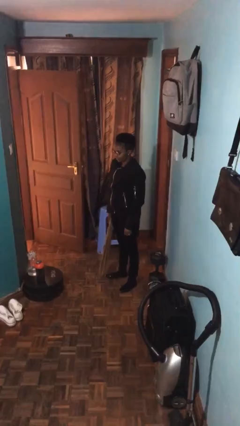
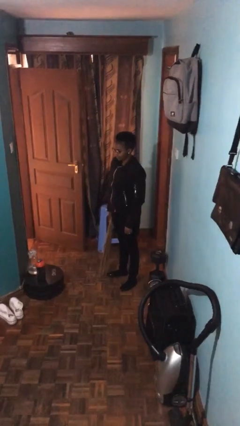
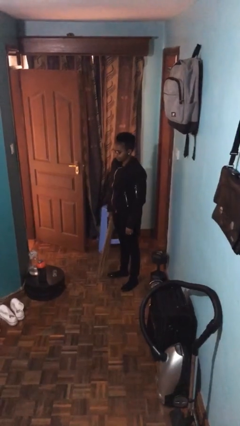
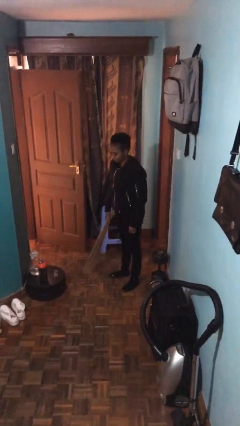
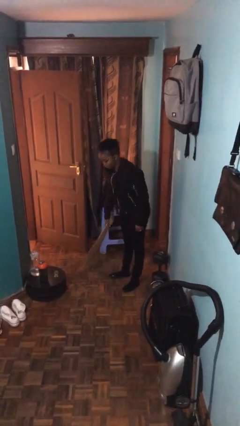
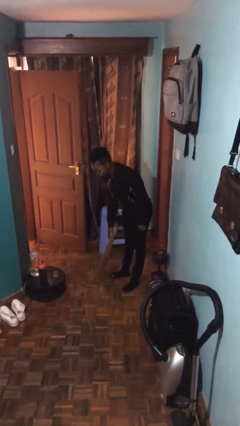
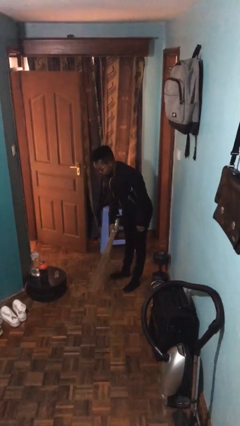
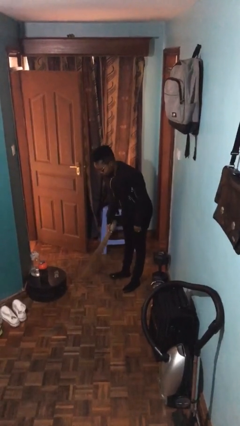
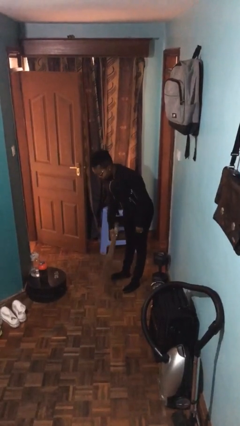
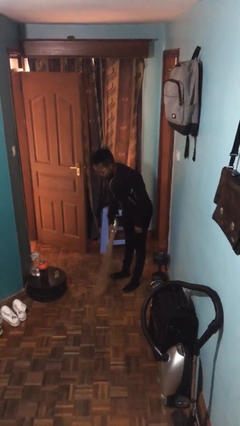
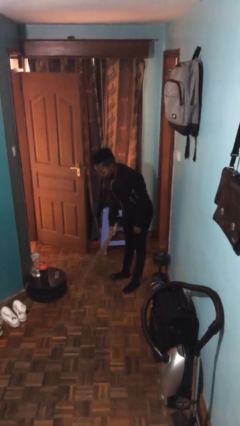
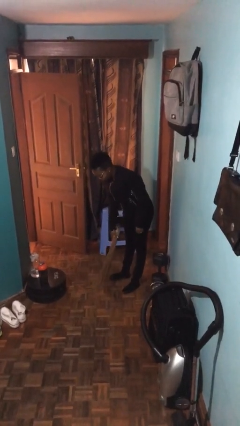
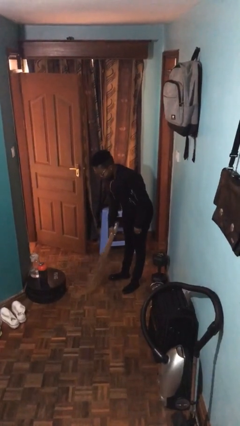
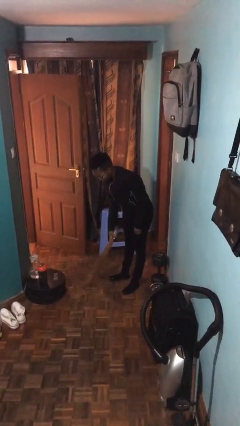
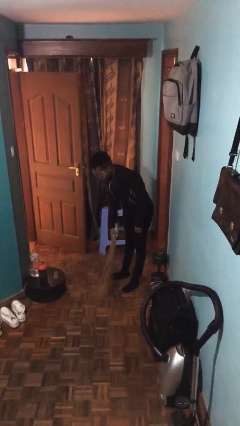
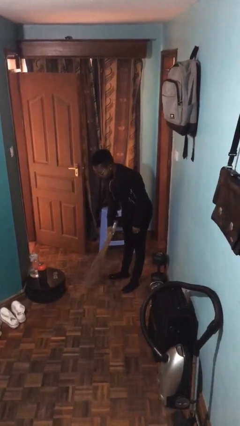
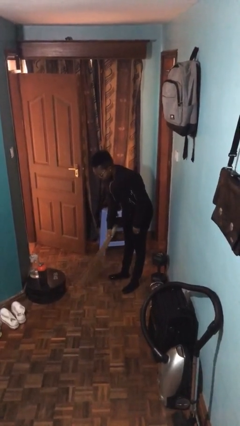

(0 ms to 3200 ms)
person sweeps floor

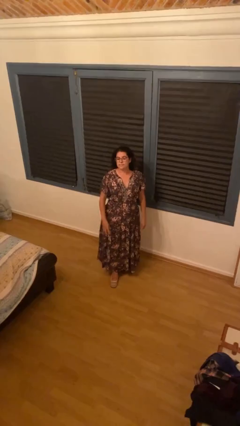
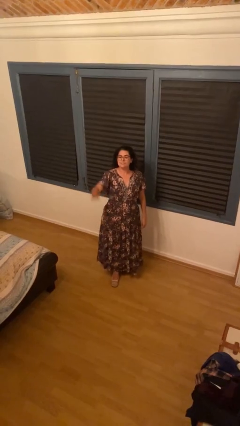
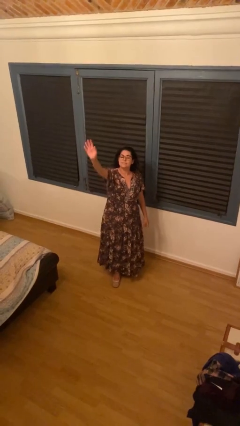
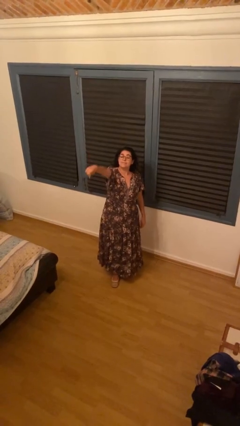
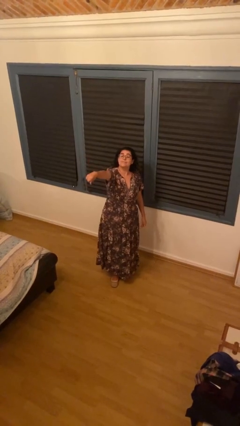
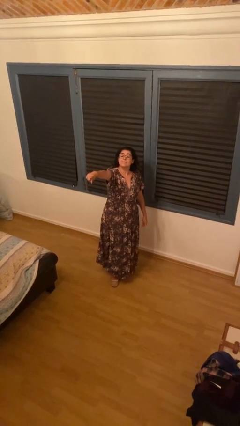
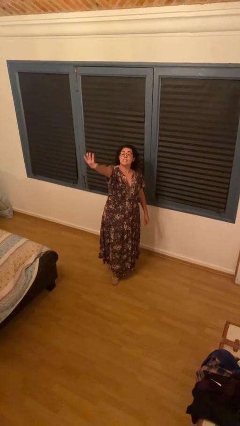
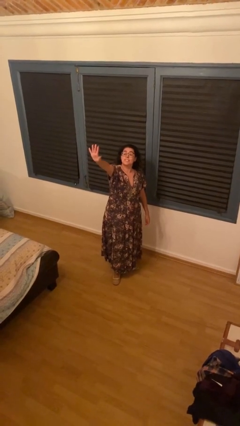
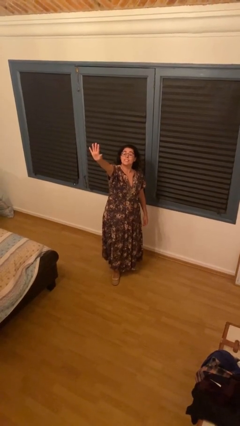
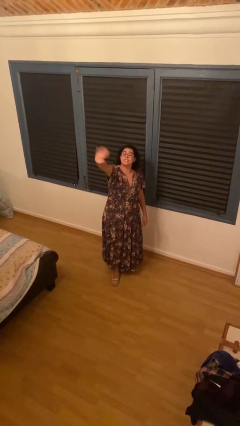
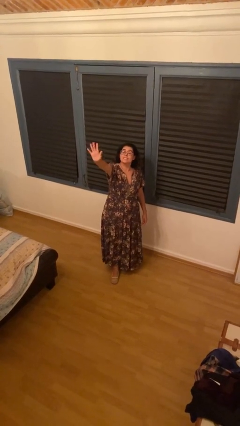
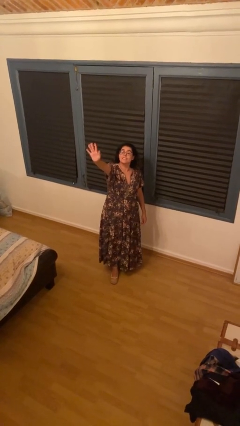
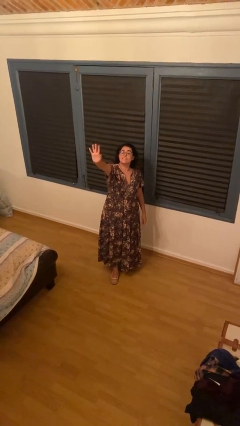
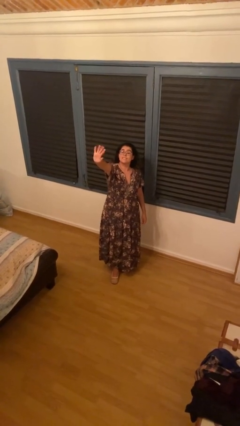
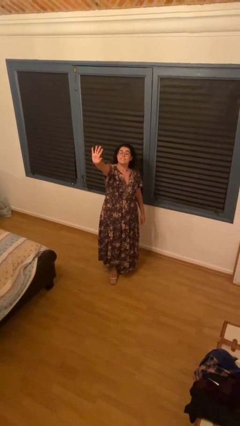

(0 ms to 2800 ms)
person waves at person

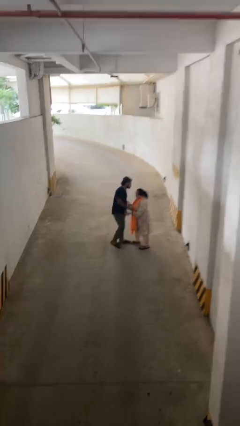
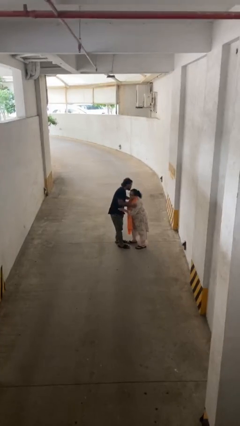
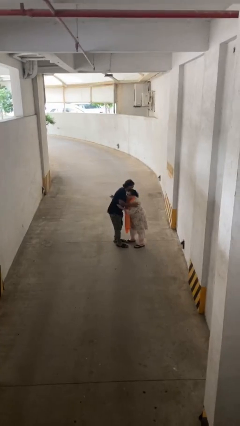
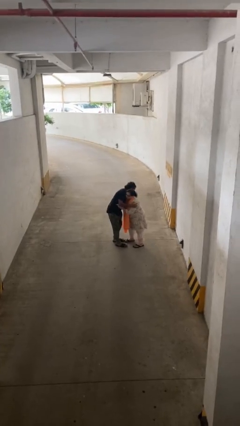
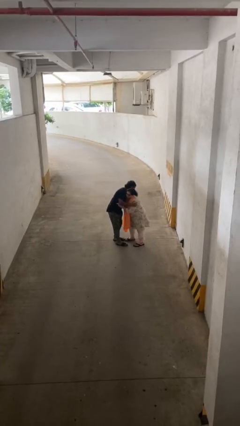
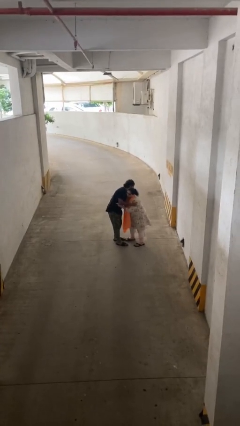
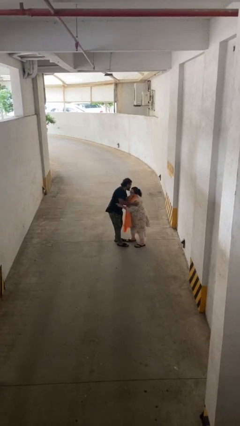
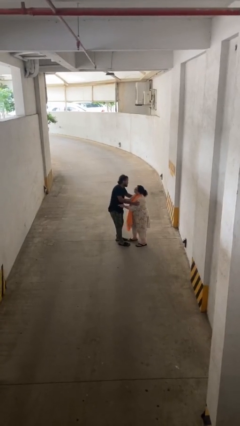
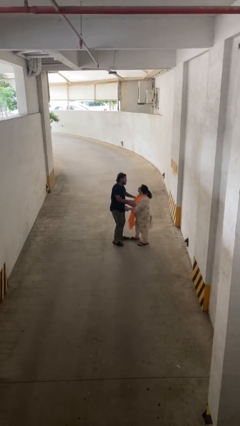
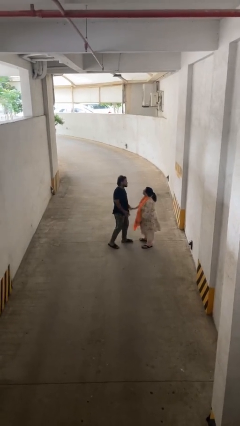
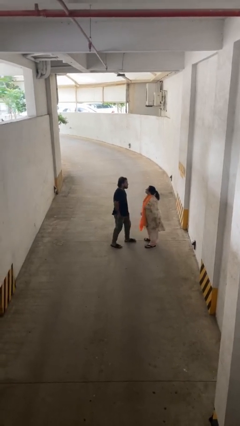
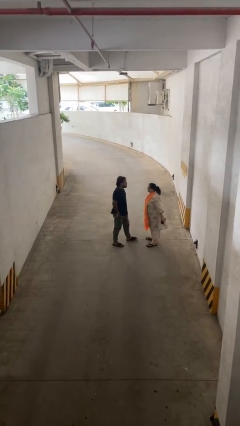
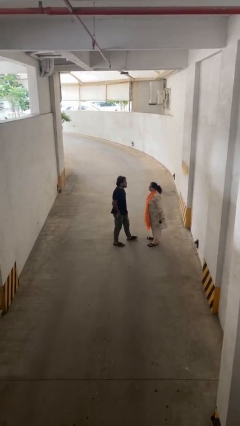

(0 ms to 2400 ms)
person embraces person

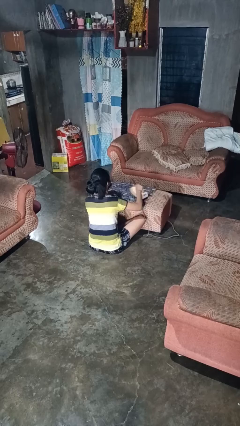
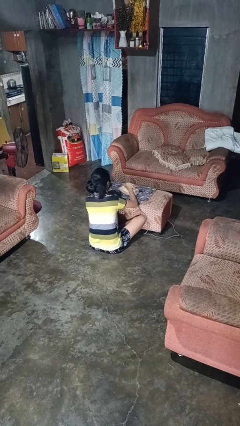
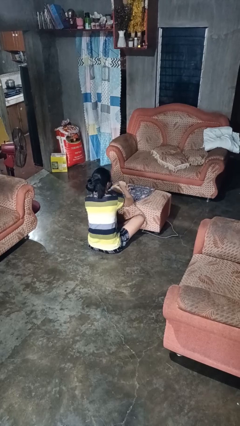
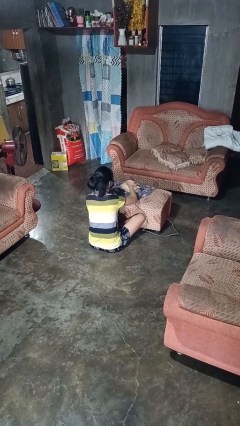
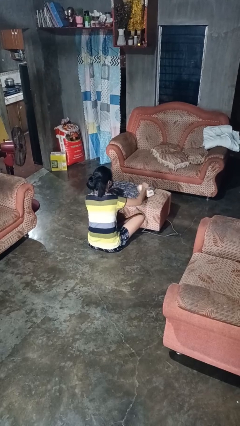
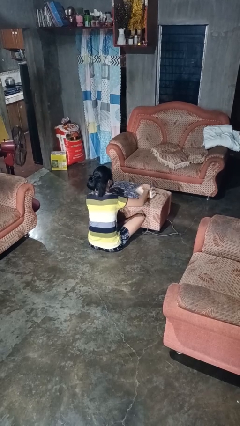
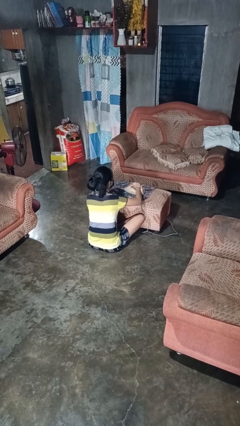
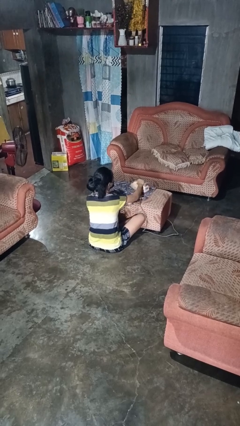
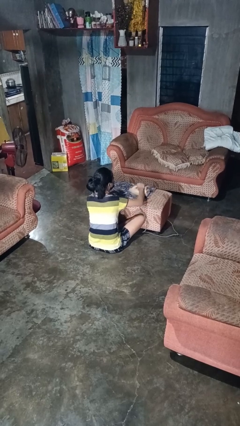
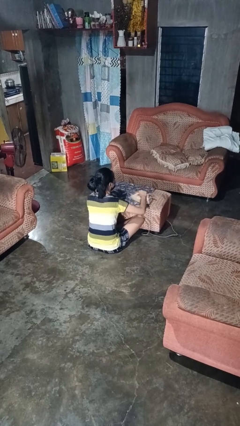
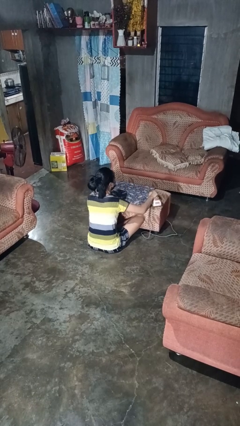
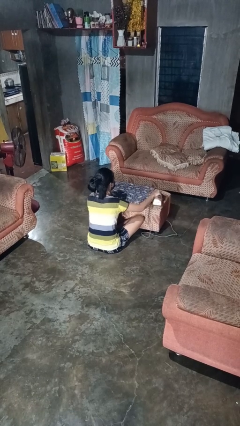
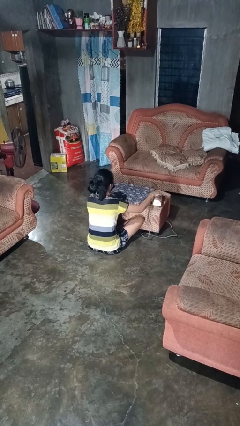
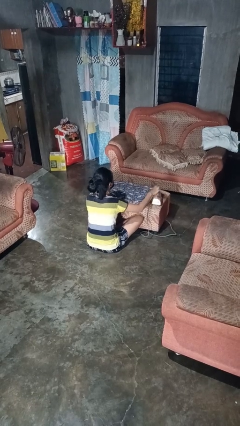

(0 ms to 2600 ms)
person irons clothes

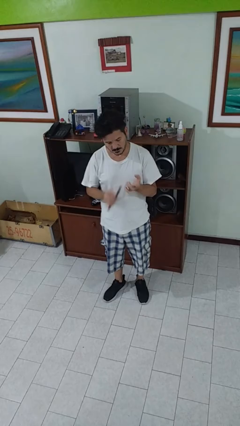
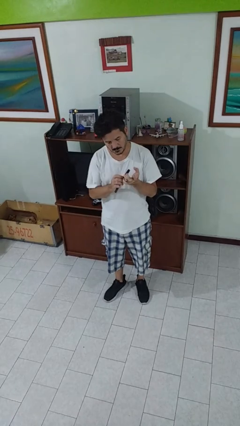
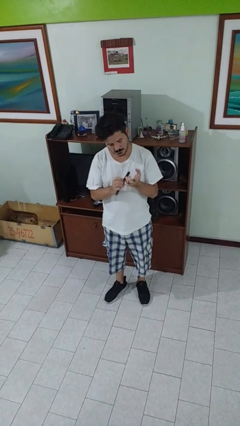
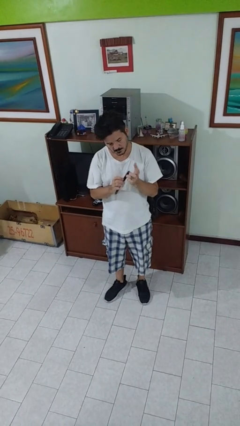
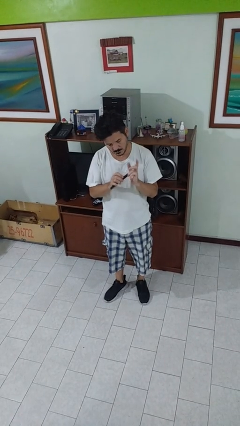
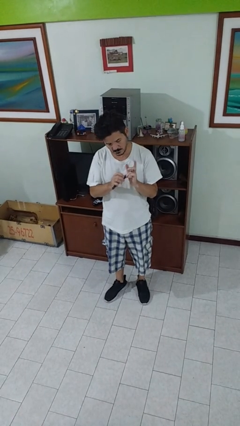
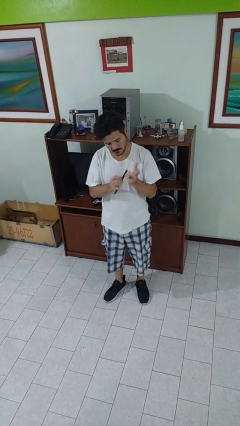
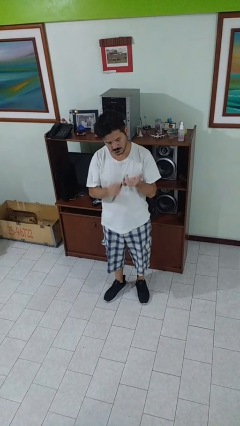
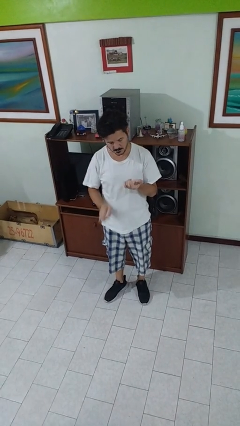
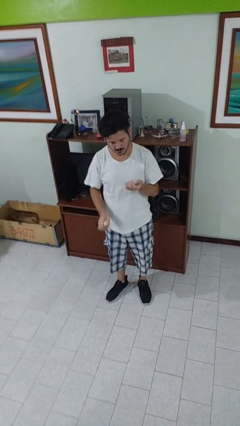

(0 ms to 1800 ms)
person files fingernails

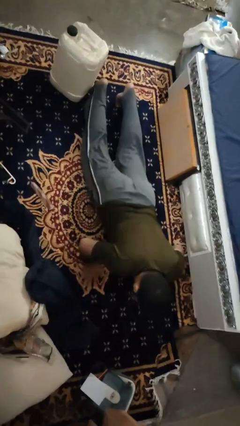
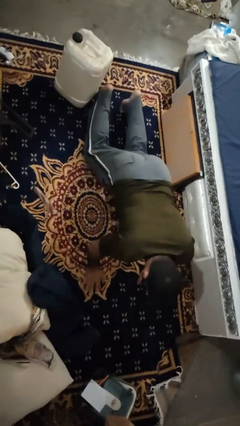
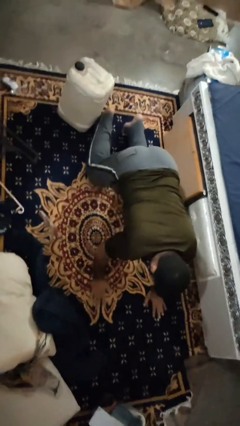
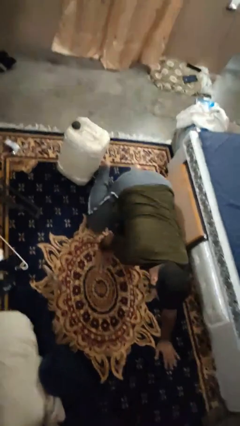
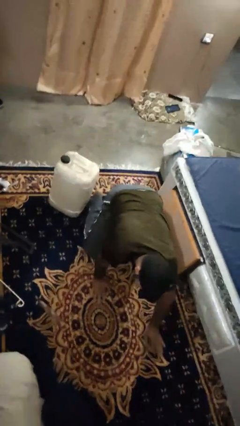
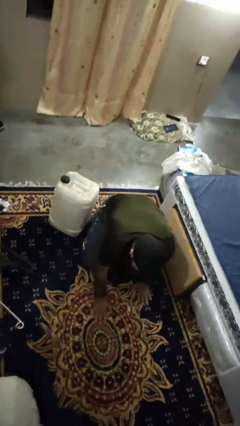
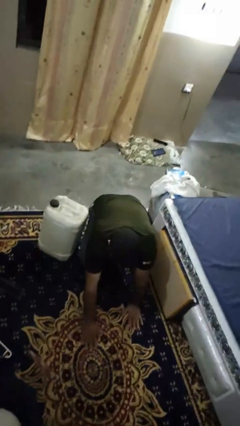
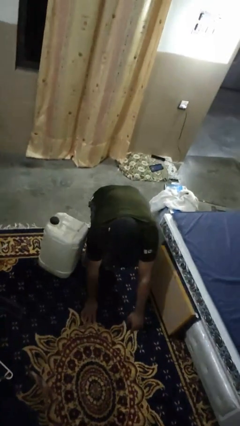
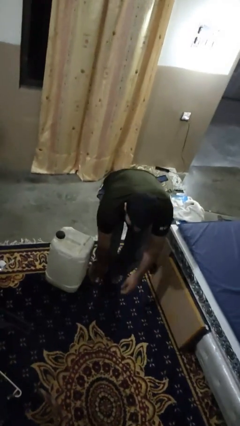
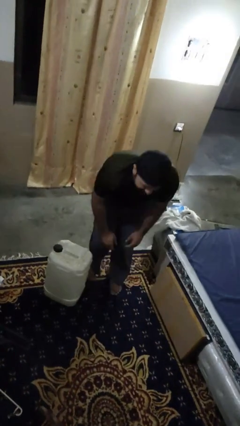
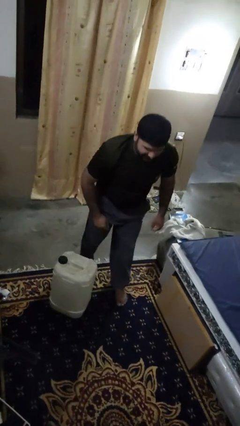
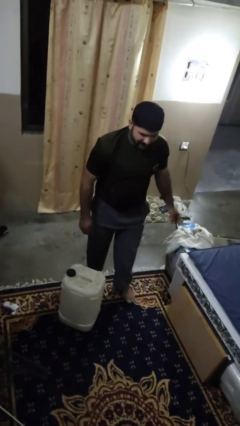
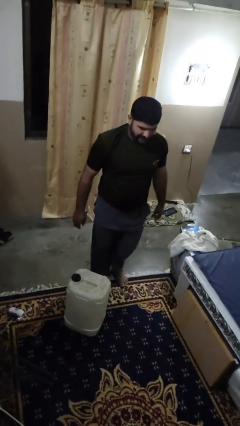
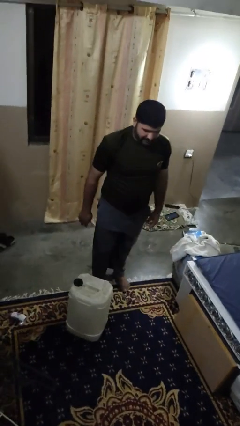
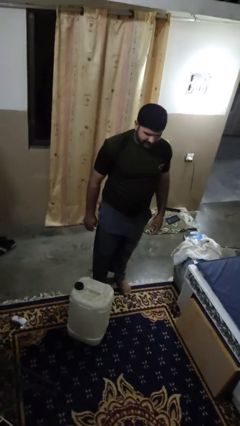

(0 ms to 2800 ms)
person stands up from floor

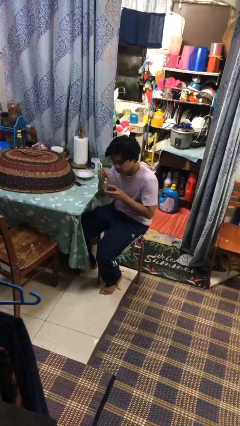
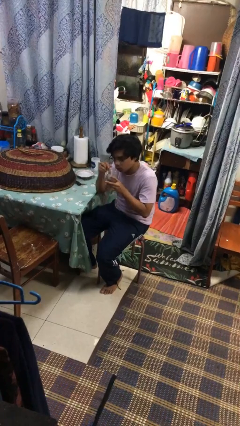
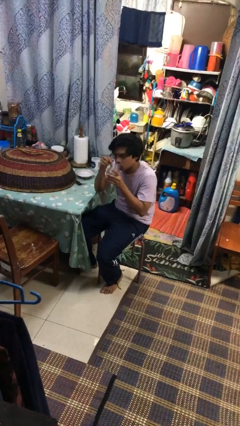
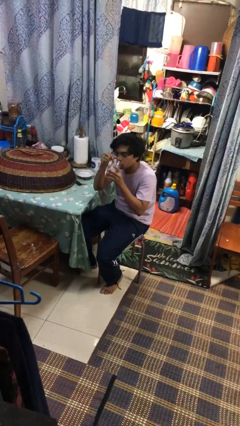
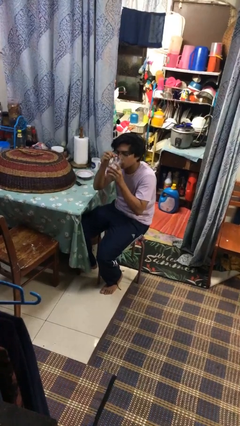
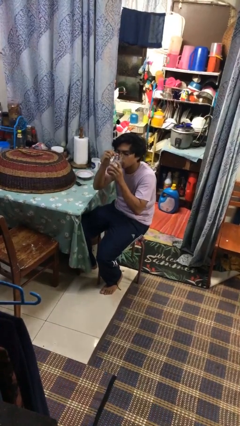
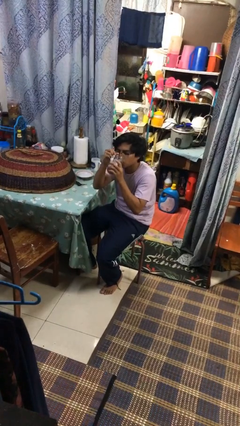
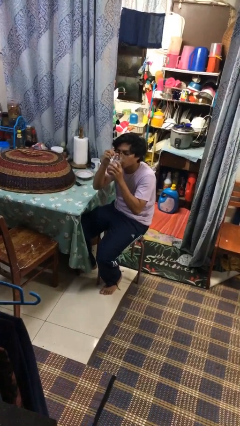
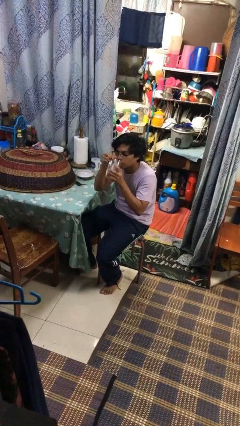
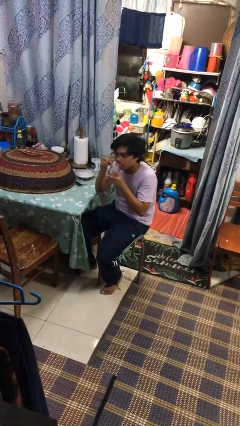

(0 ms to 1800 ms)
person drinks from mug
